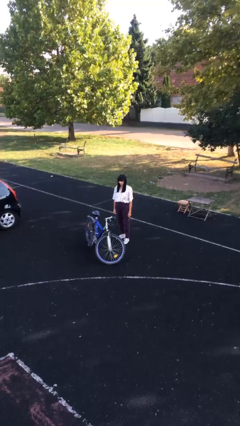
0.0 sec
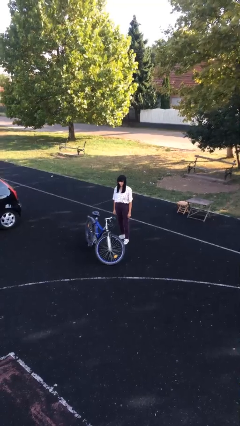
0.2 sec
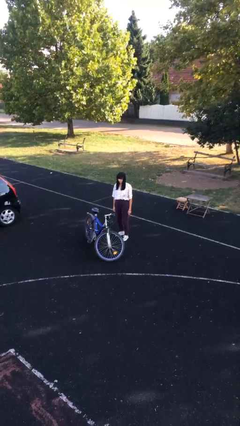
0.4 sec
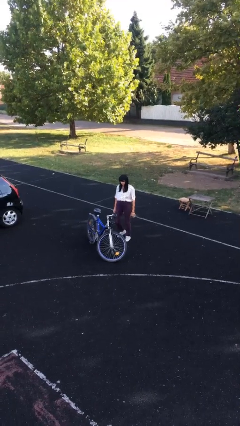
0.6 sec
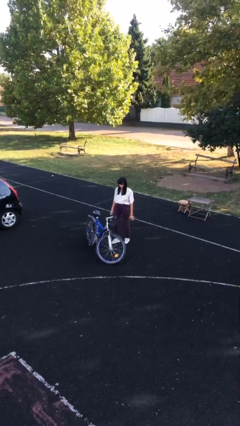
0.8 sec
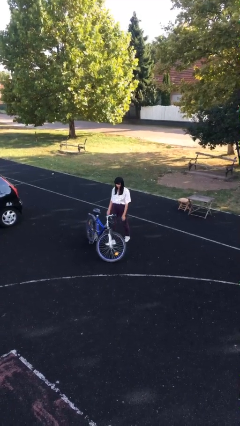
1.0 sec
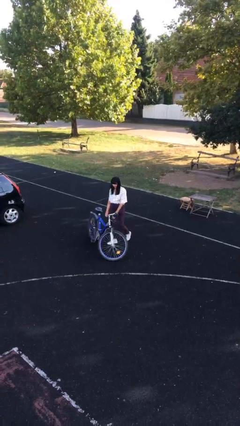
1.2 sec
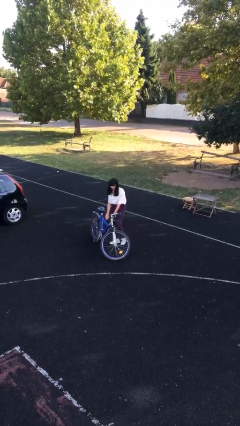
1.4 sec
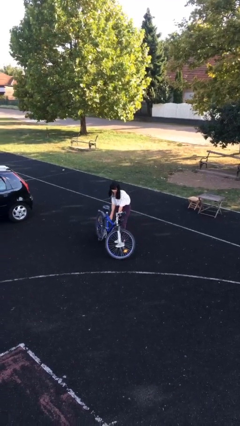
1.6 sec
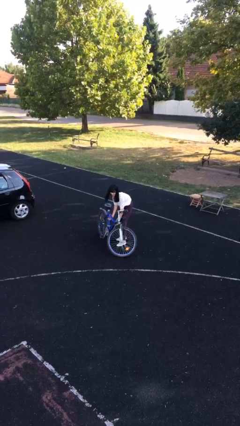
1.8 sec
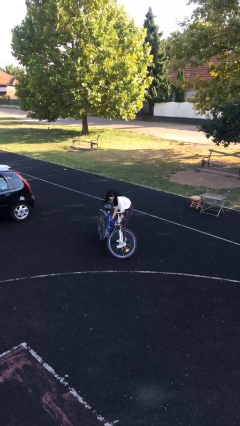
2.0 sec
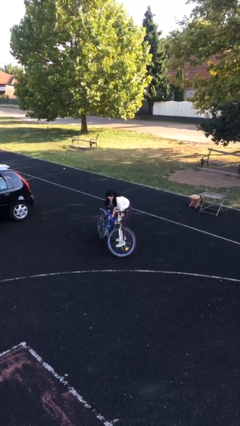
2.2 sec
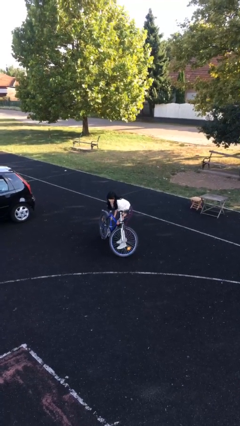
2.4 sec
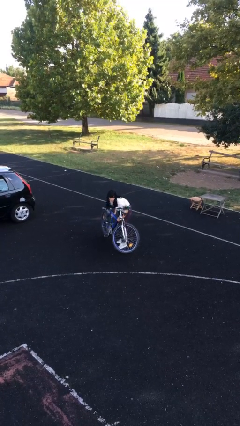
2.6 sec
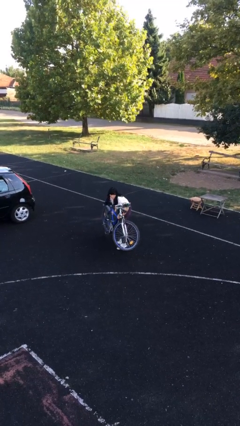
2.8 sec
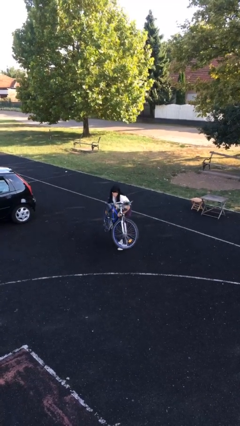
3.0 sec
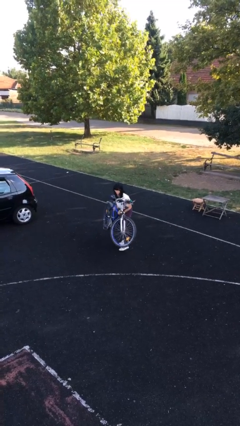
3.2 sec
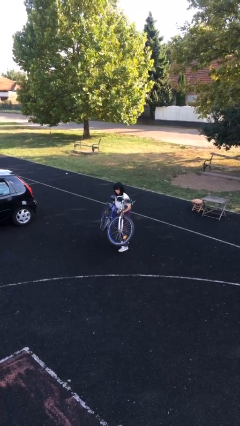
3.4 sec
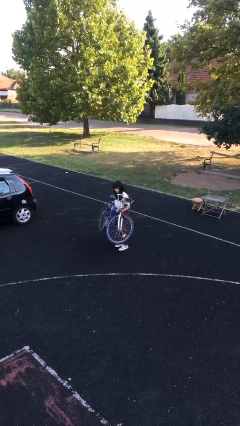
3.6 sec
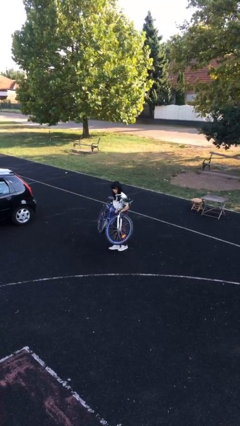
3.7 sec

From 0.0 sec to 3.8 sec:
person picks up object from floor

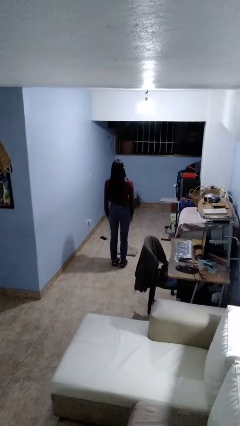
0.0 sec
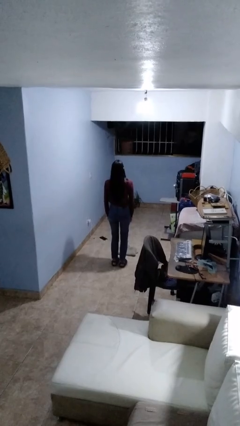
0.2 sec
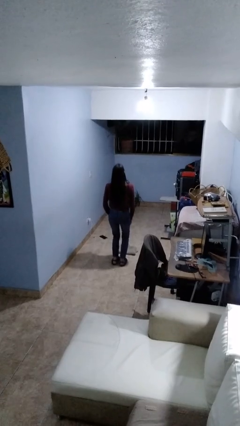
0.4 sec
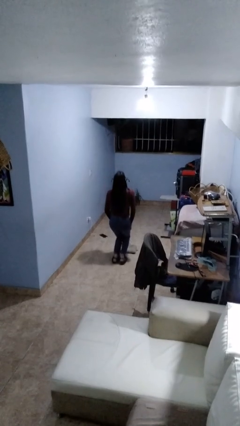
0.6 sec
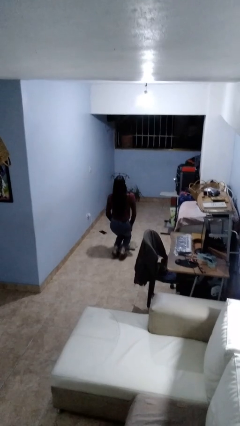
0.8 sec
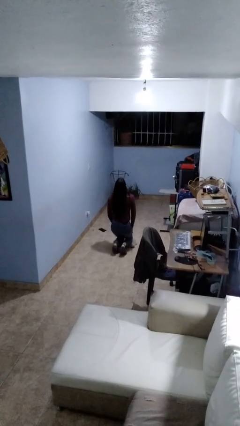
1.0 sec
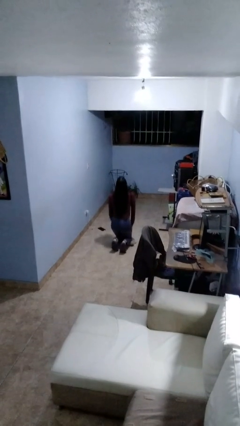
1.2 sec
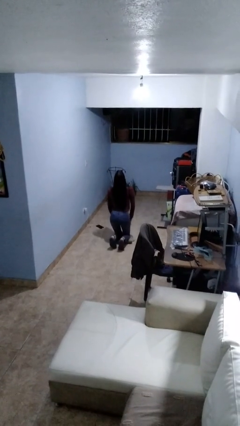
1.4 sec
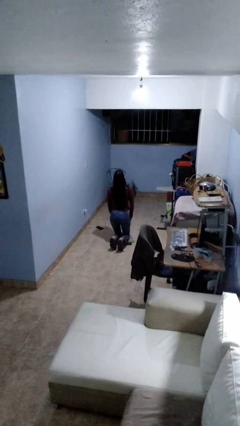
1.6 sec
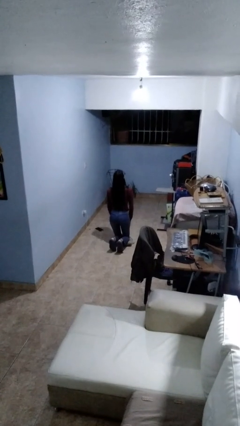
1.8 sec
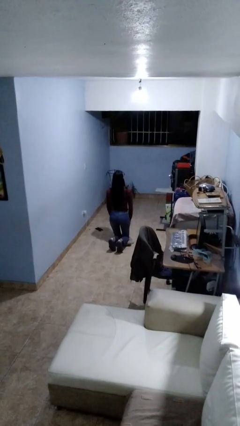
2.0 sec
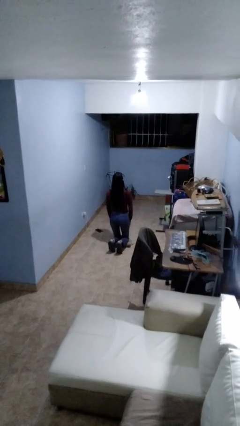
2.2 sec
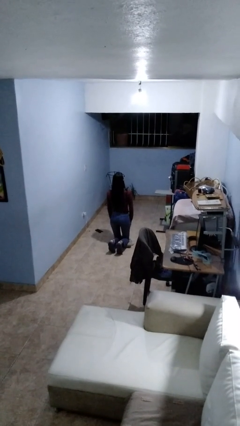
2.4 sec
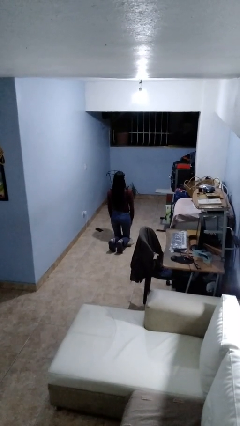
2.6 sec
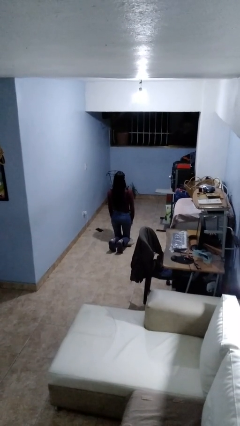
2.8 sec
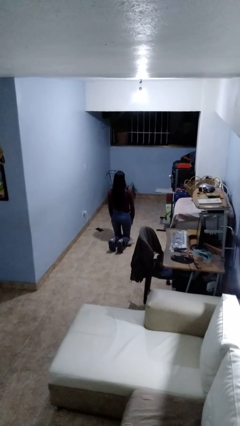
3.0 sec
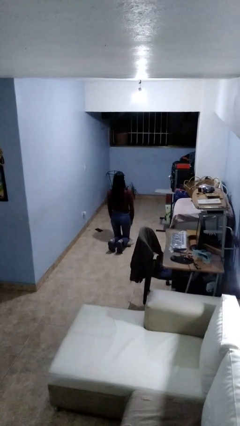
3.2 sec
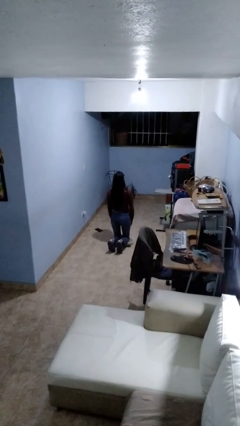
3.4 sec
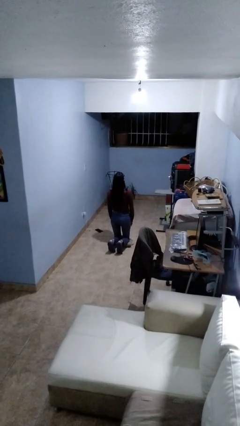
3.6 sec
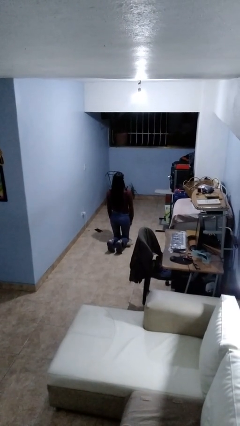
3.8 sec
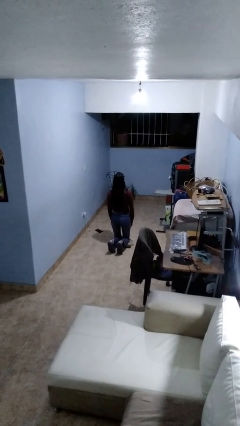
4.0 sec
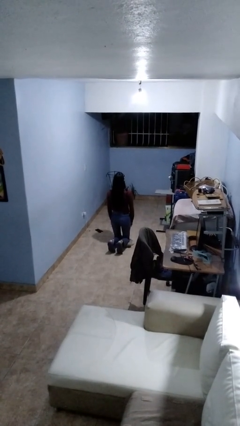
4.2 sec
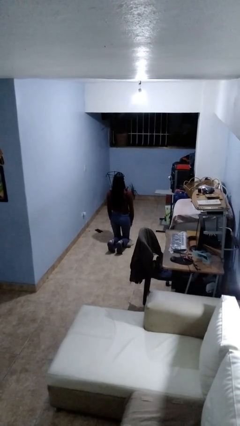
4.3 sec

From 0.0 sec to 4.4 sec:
person kneels

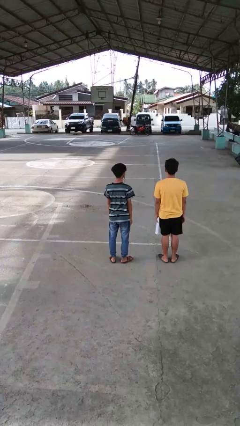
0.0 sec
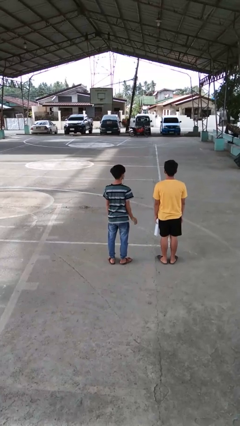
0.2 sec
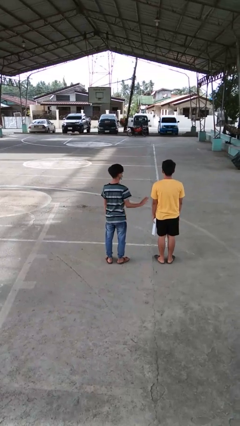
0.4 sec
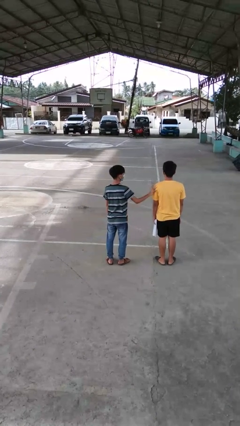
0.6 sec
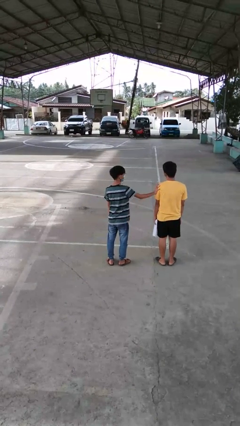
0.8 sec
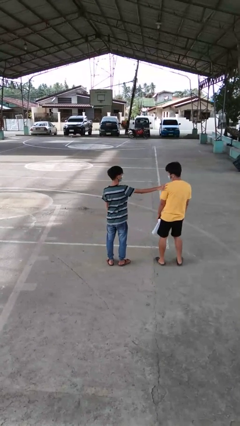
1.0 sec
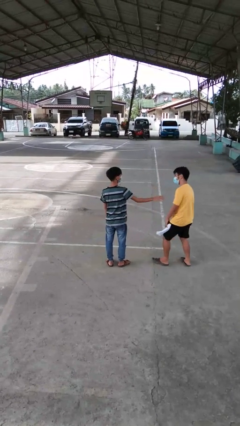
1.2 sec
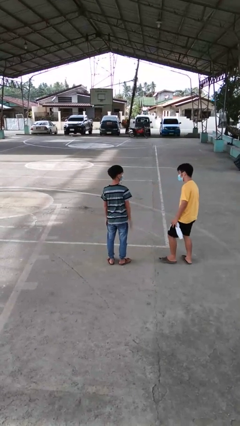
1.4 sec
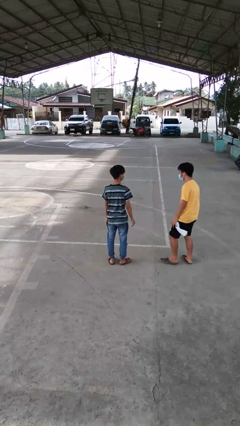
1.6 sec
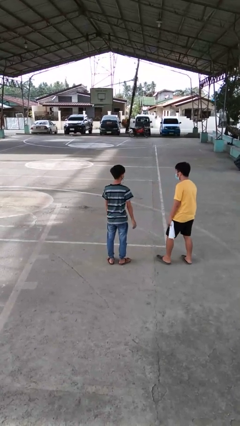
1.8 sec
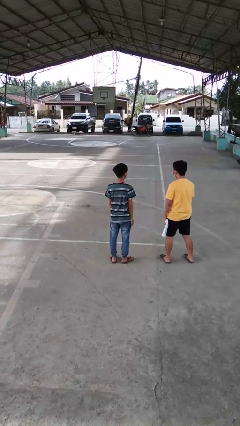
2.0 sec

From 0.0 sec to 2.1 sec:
person shoves person

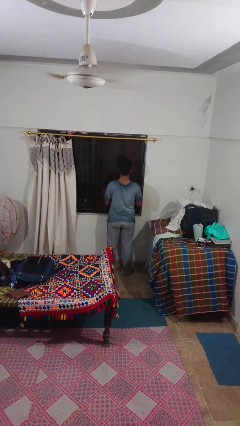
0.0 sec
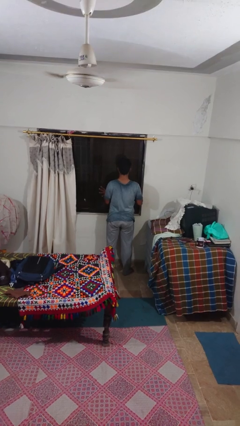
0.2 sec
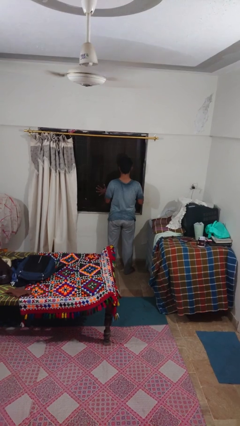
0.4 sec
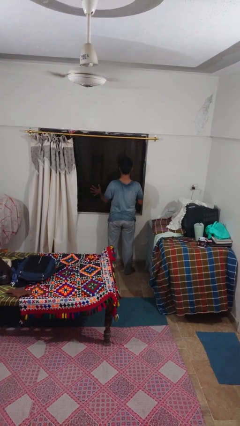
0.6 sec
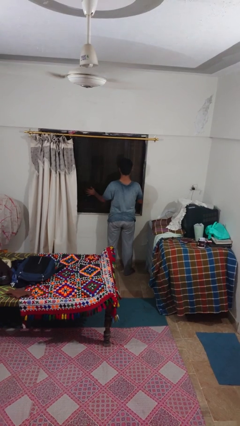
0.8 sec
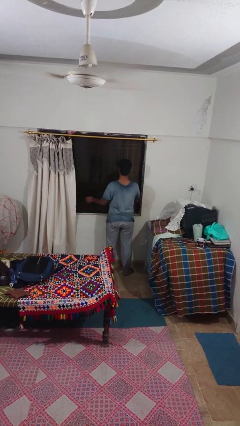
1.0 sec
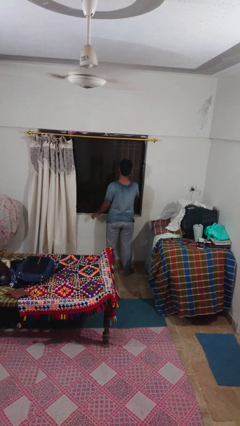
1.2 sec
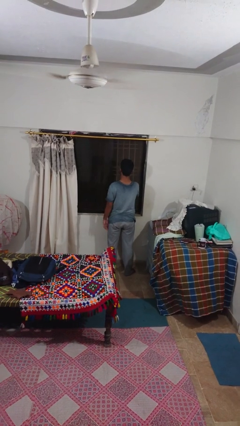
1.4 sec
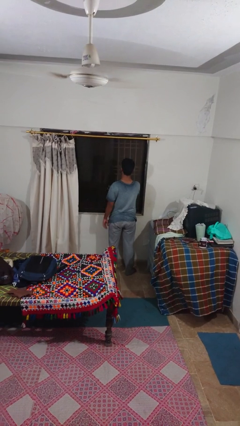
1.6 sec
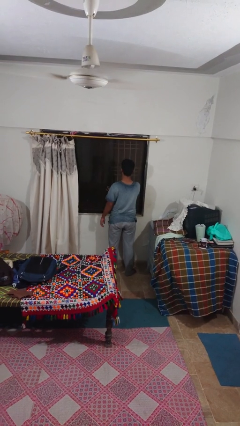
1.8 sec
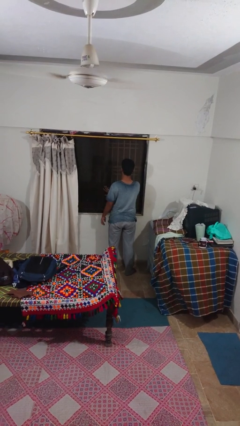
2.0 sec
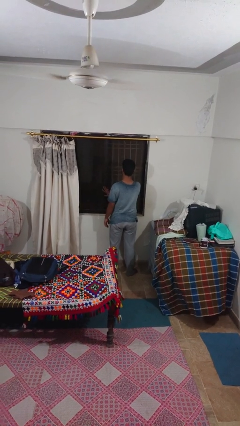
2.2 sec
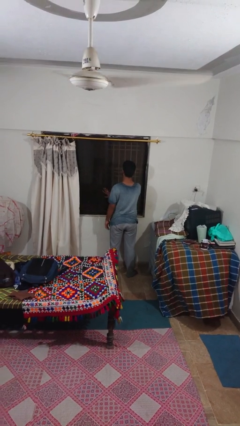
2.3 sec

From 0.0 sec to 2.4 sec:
person opens sliding door

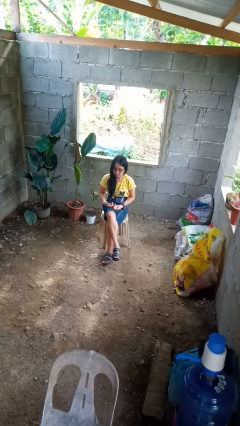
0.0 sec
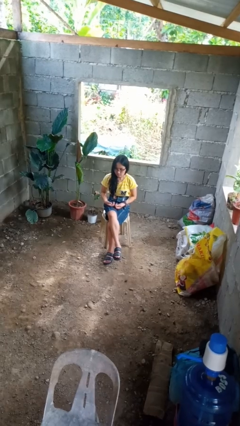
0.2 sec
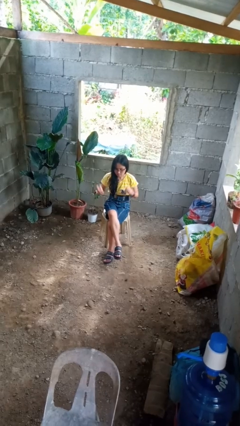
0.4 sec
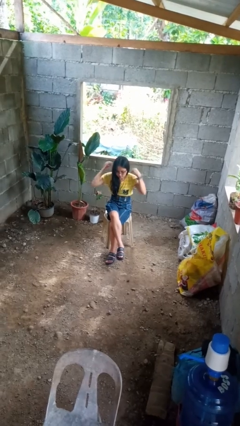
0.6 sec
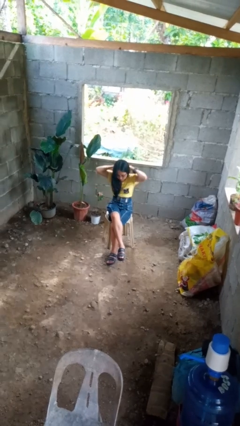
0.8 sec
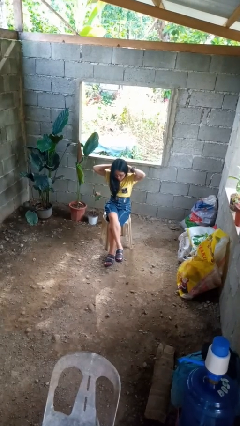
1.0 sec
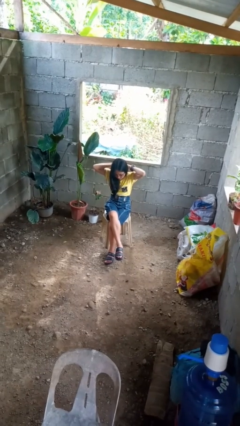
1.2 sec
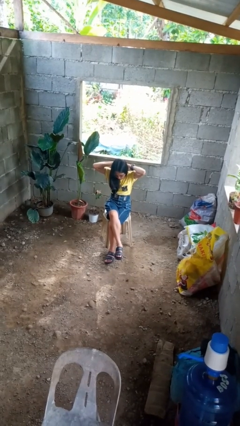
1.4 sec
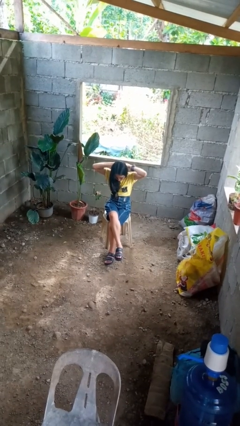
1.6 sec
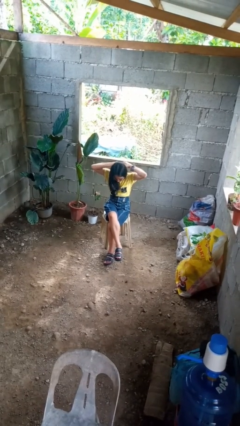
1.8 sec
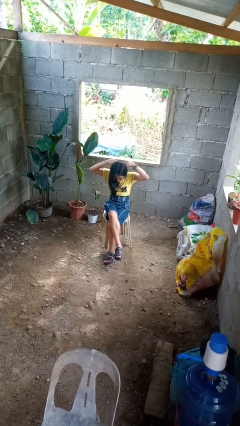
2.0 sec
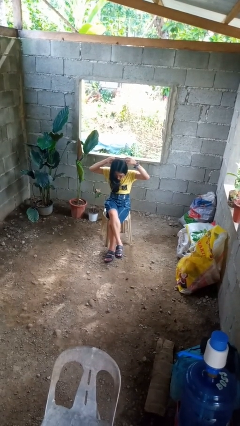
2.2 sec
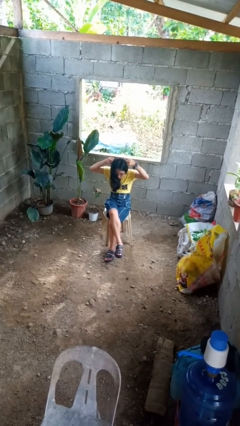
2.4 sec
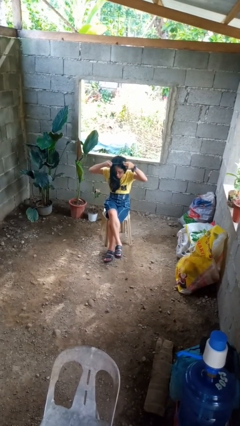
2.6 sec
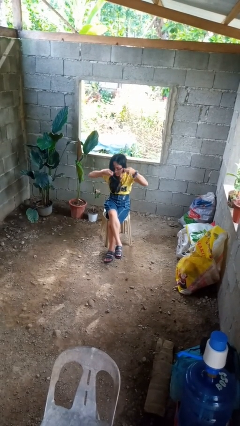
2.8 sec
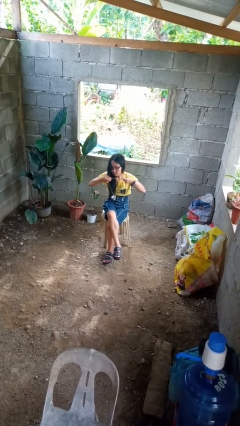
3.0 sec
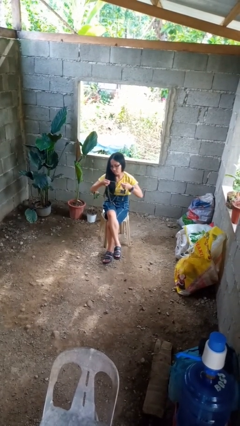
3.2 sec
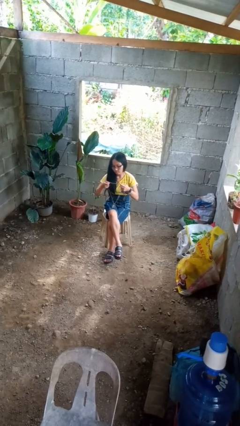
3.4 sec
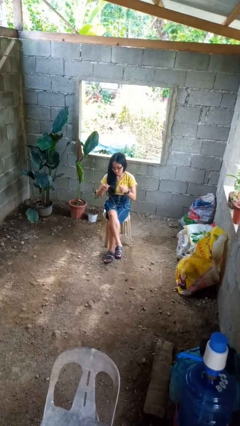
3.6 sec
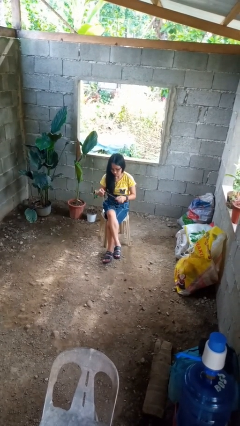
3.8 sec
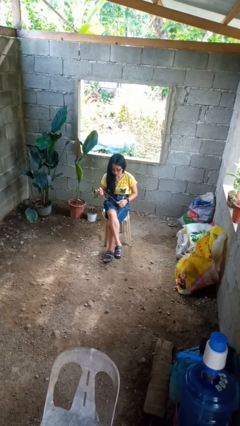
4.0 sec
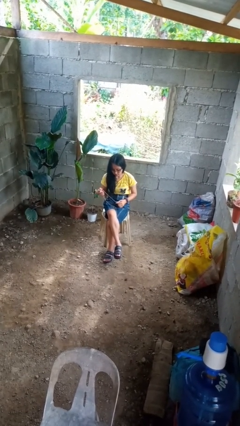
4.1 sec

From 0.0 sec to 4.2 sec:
person takes off necklace

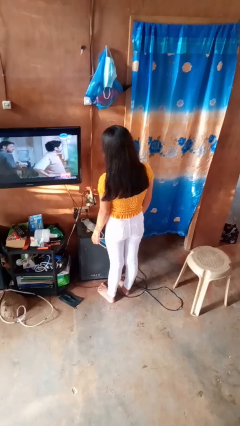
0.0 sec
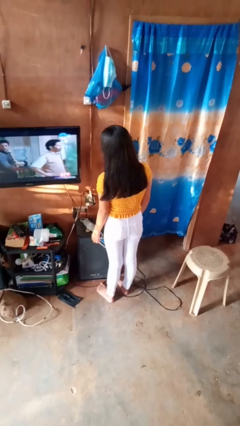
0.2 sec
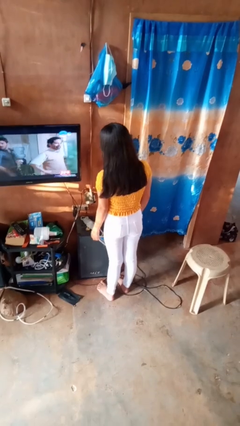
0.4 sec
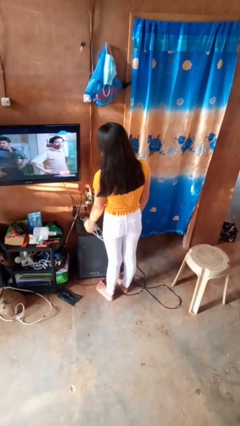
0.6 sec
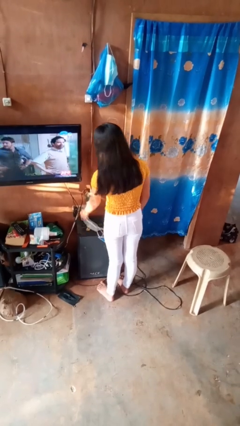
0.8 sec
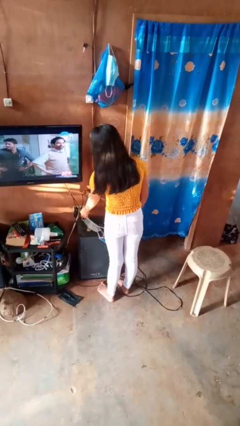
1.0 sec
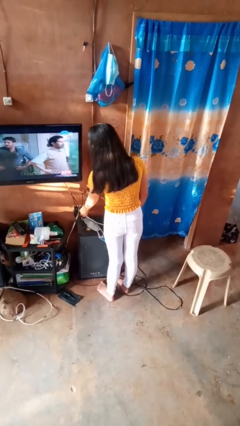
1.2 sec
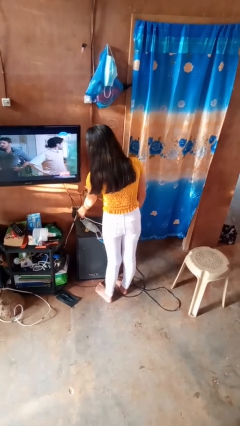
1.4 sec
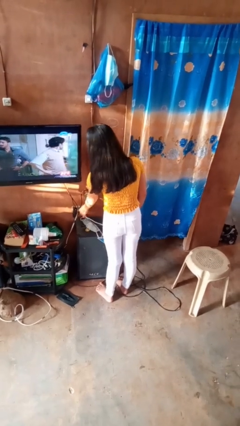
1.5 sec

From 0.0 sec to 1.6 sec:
person plugs into electrical socket
